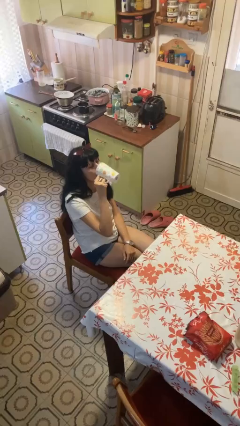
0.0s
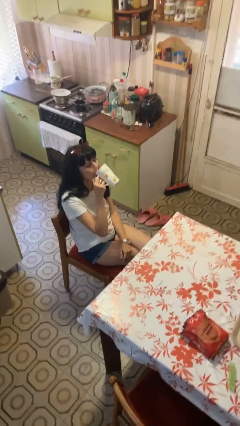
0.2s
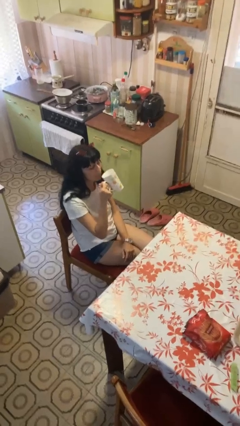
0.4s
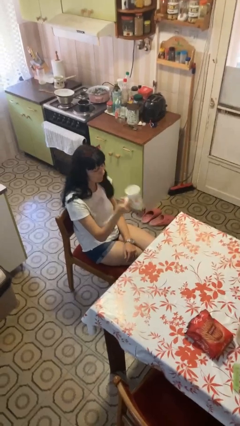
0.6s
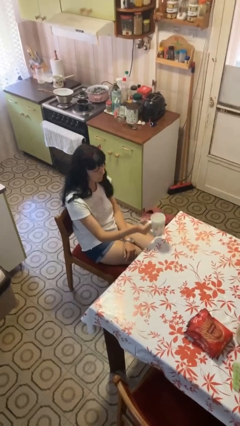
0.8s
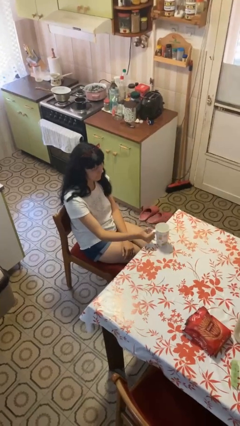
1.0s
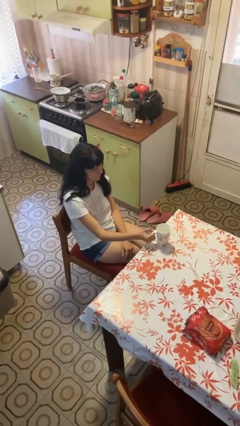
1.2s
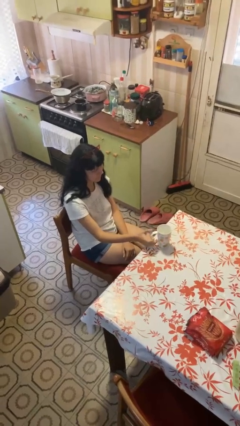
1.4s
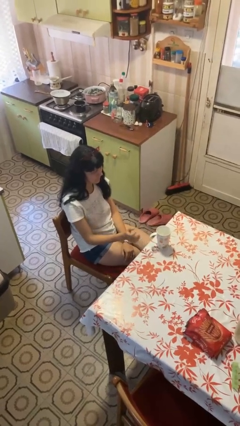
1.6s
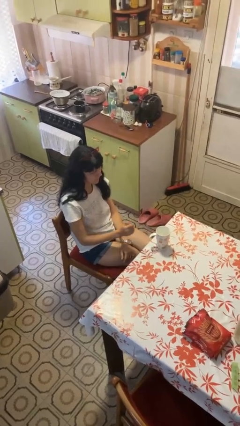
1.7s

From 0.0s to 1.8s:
person puts down object on table

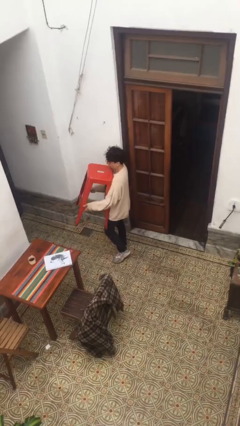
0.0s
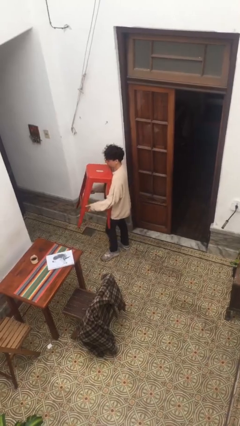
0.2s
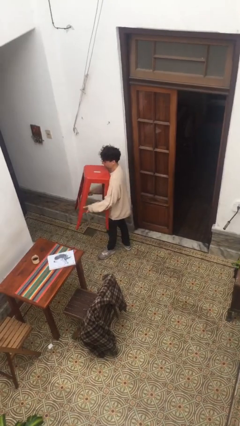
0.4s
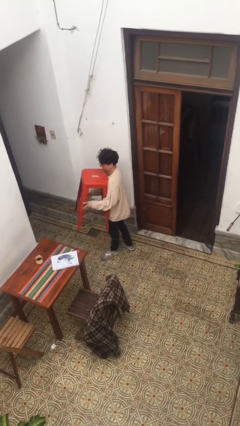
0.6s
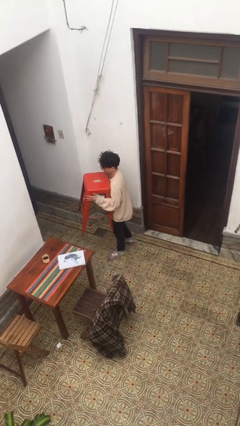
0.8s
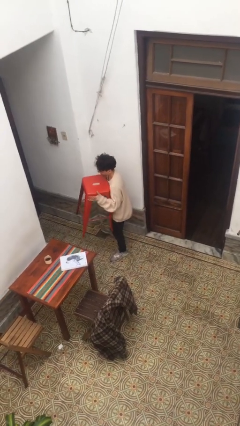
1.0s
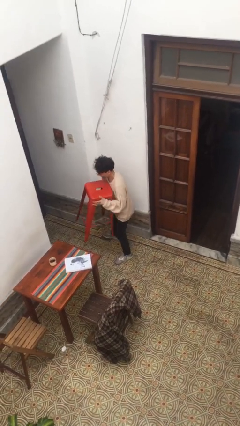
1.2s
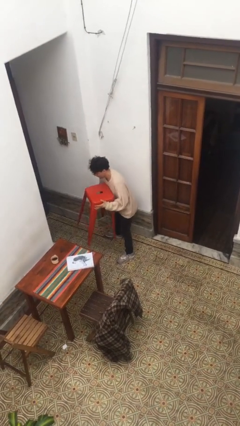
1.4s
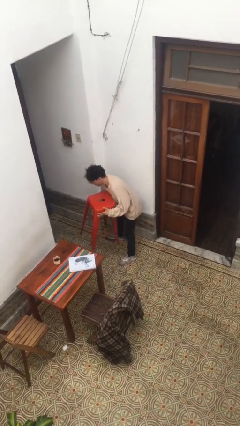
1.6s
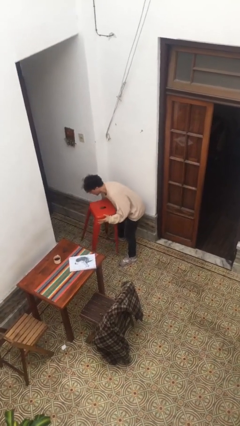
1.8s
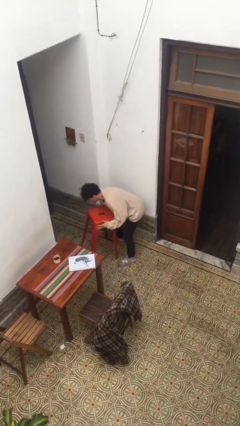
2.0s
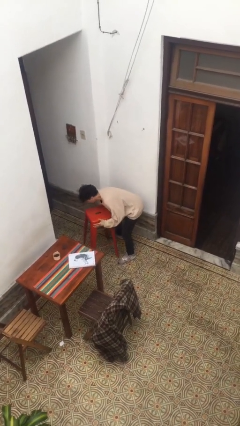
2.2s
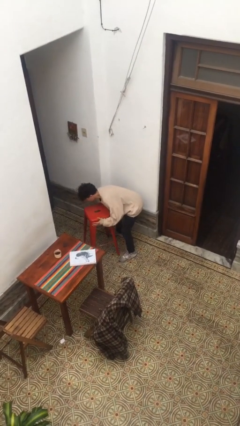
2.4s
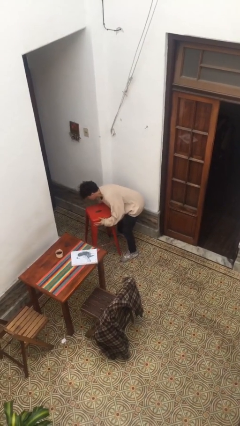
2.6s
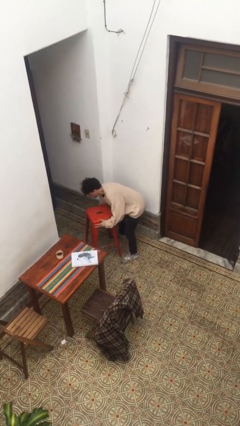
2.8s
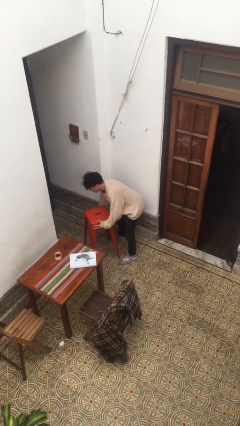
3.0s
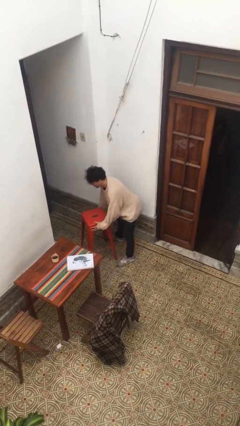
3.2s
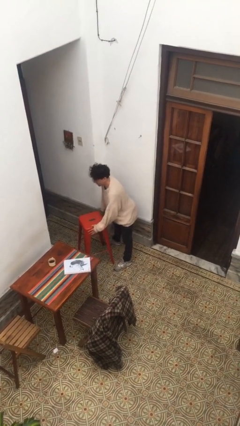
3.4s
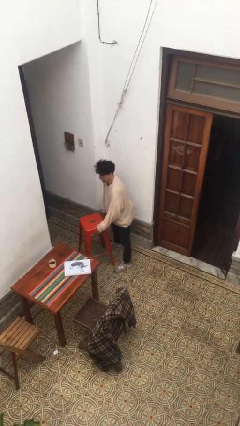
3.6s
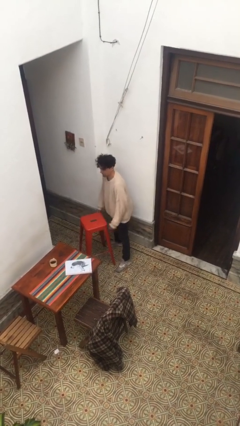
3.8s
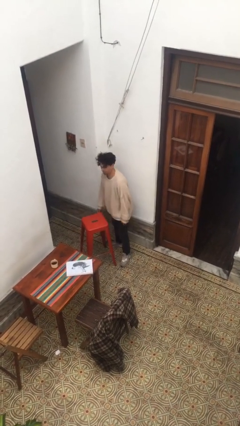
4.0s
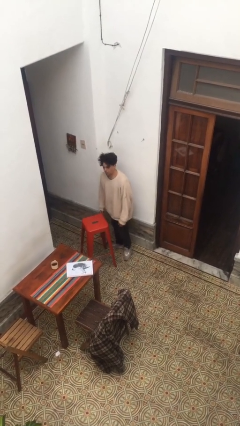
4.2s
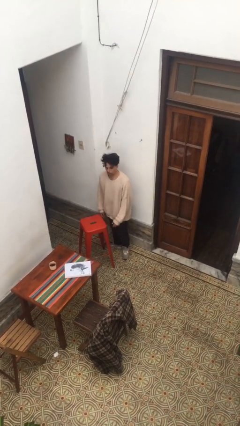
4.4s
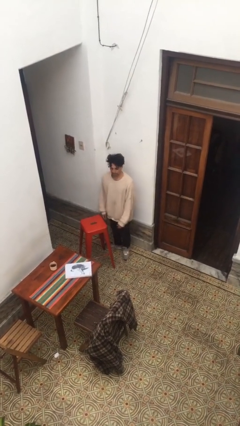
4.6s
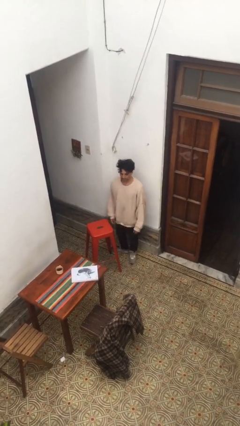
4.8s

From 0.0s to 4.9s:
person puts down object on floor

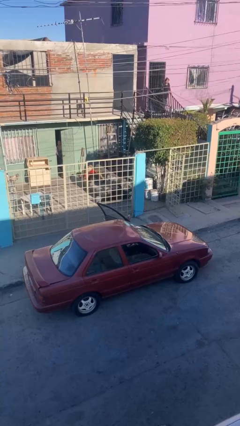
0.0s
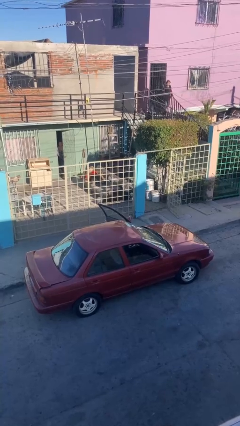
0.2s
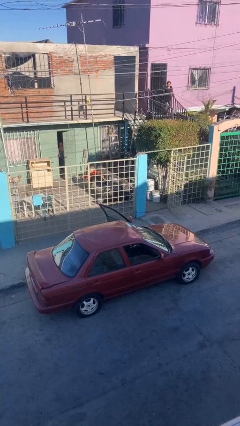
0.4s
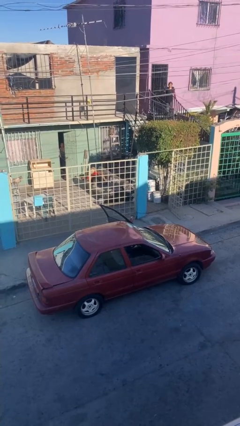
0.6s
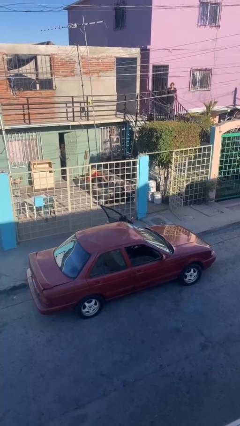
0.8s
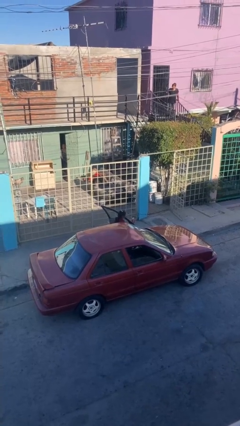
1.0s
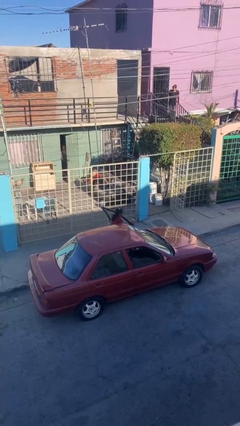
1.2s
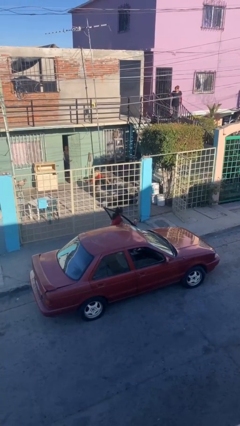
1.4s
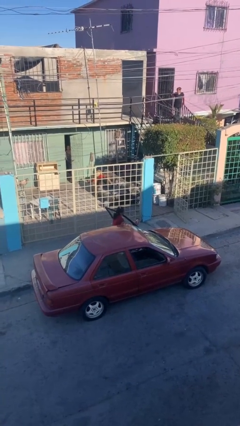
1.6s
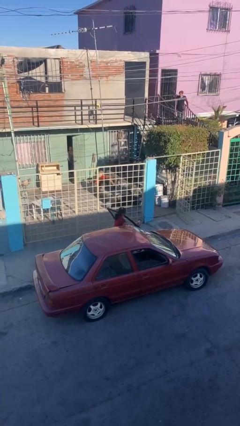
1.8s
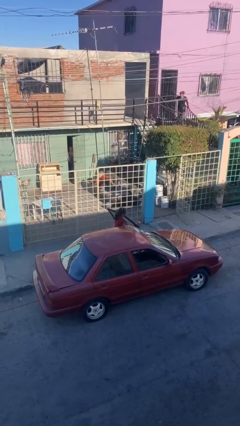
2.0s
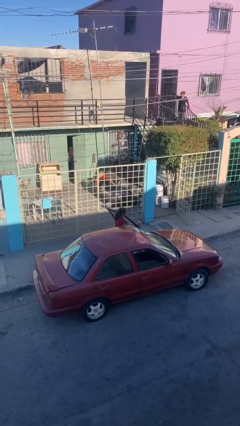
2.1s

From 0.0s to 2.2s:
person exits car

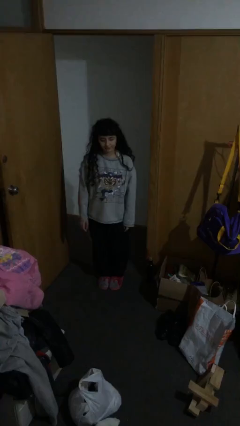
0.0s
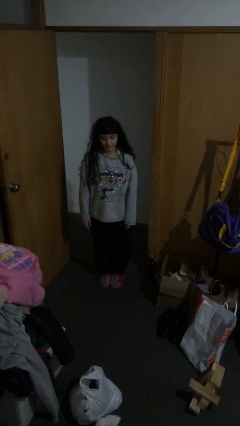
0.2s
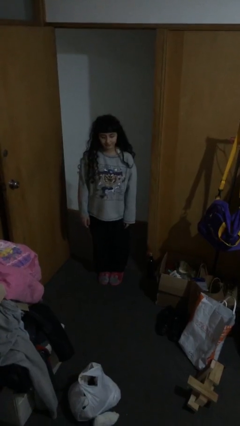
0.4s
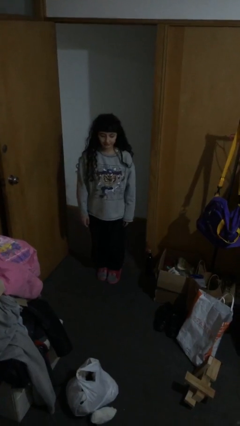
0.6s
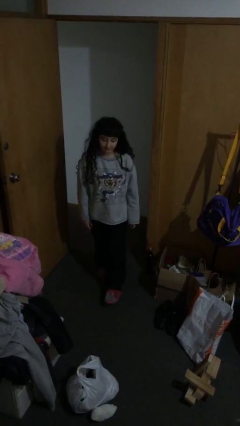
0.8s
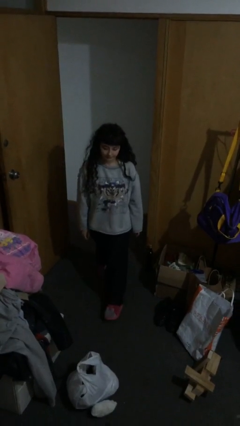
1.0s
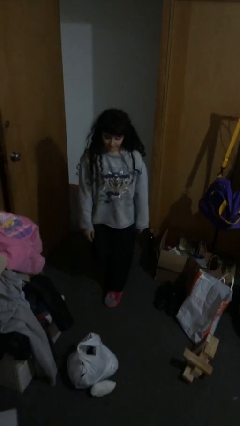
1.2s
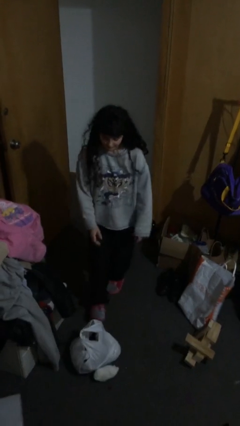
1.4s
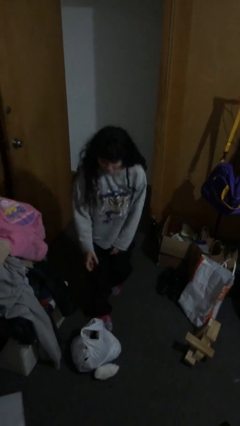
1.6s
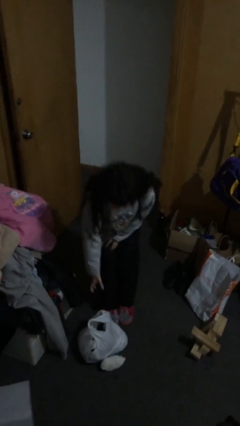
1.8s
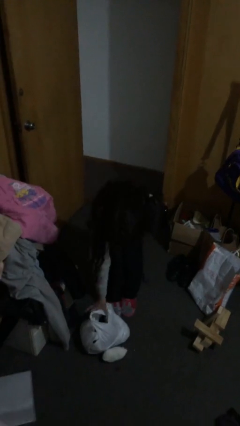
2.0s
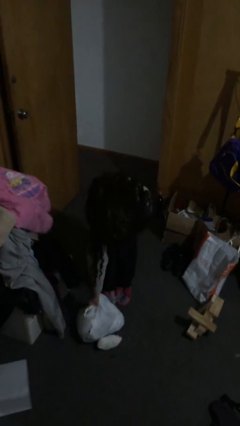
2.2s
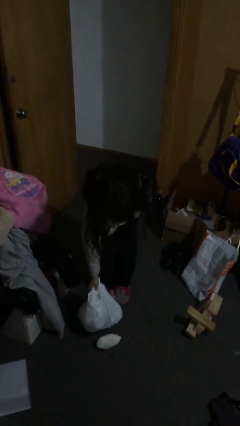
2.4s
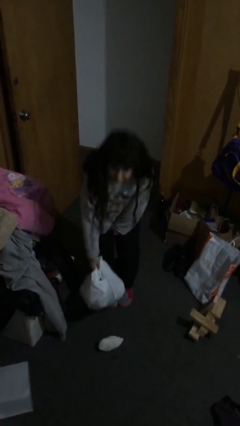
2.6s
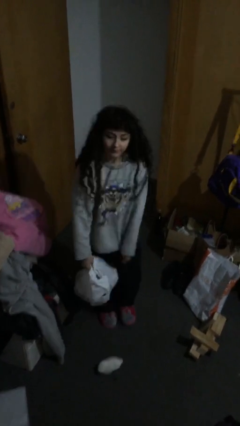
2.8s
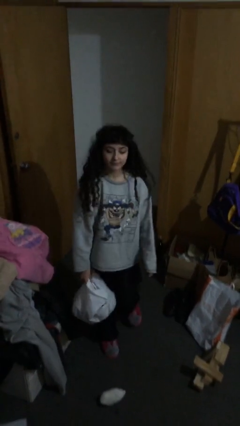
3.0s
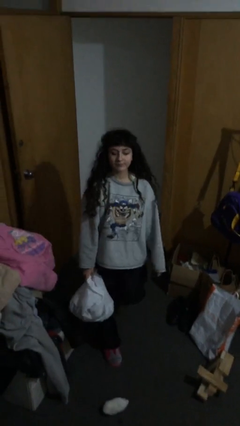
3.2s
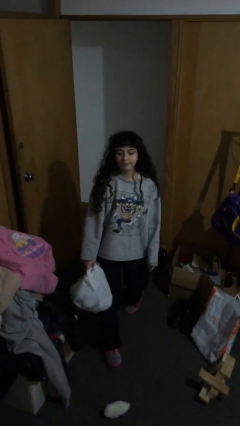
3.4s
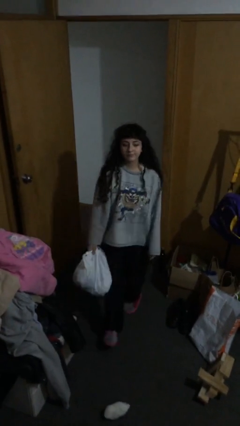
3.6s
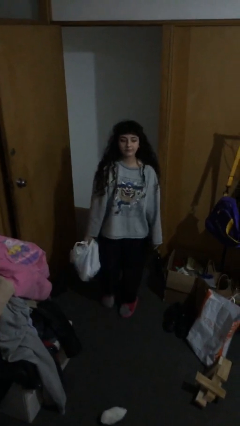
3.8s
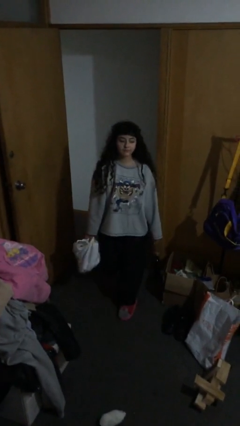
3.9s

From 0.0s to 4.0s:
person picks up object from floor

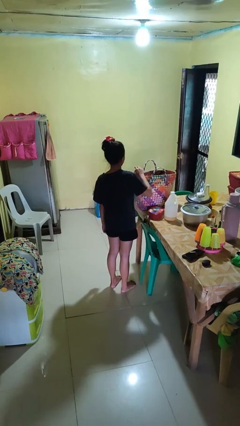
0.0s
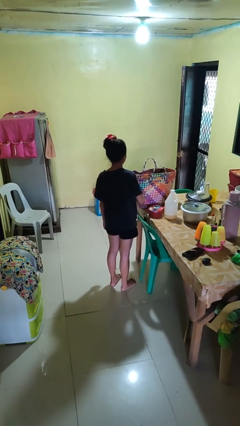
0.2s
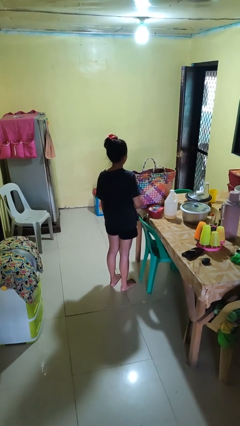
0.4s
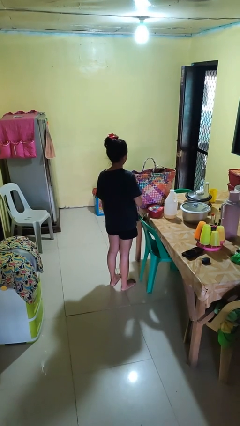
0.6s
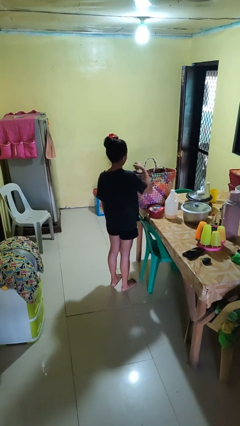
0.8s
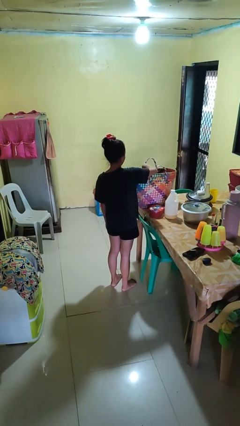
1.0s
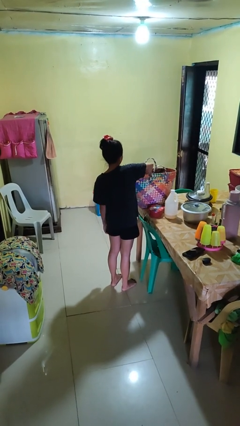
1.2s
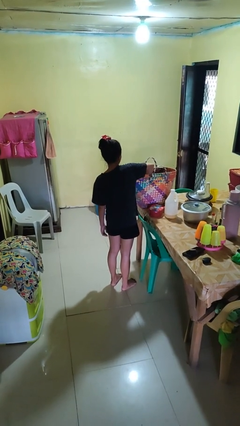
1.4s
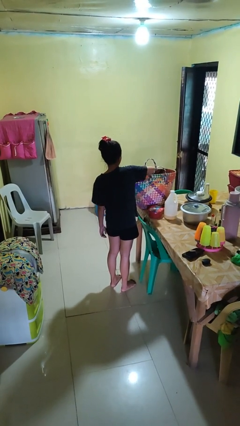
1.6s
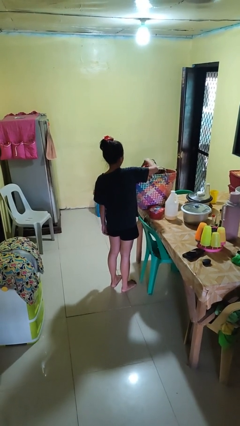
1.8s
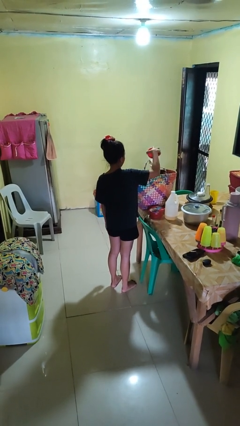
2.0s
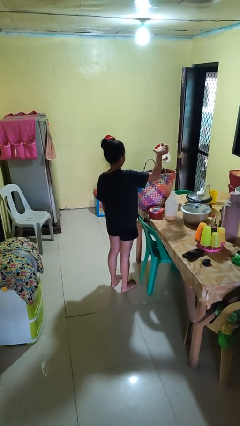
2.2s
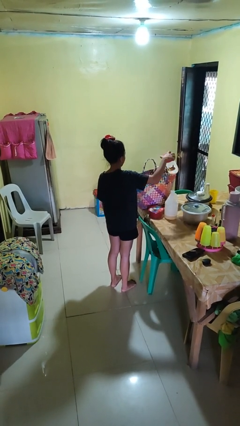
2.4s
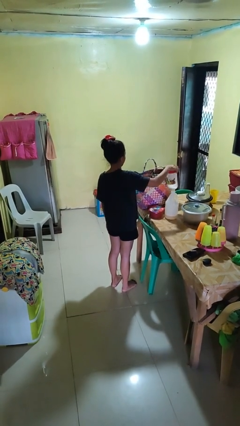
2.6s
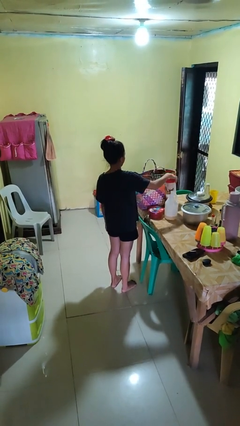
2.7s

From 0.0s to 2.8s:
person takes object from basket

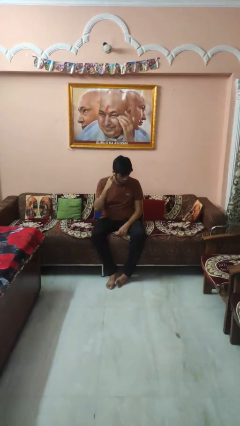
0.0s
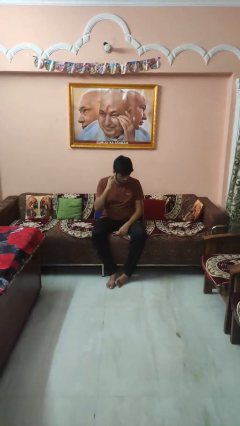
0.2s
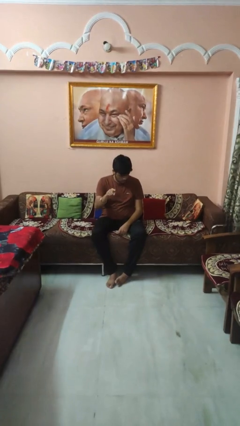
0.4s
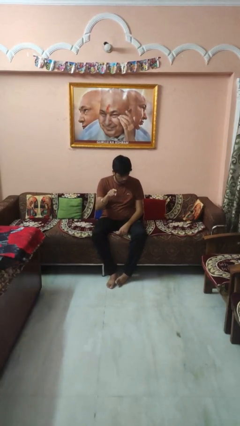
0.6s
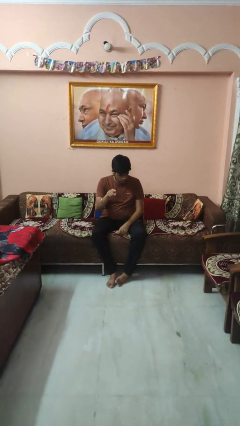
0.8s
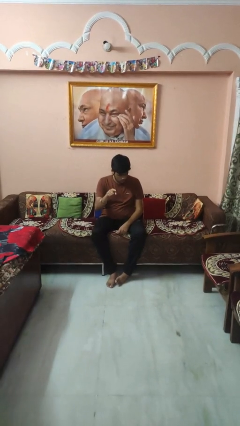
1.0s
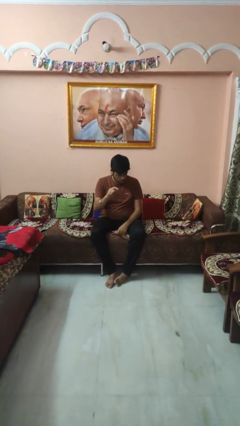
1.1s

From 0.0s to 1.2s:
person gestures listen closely

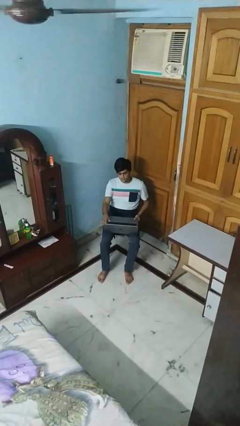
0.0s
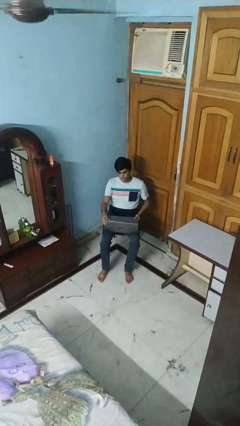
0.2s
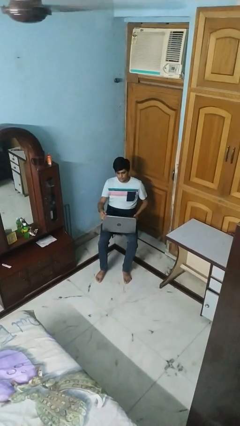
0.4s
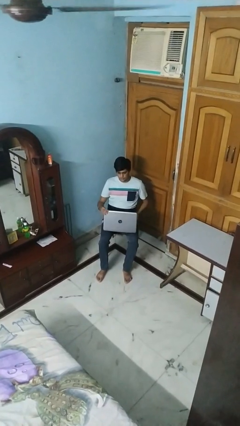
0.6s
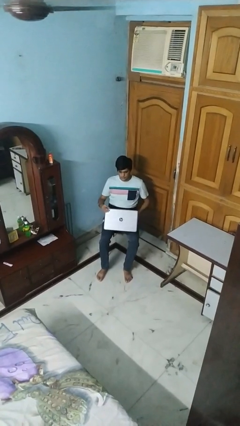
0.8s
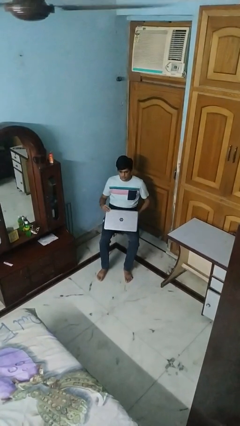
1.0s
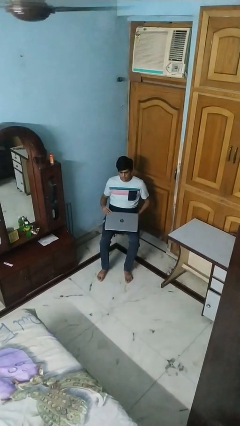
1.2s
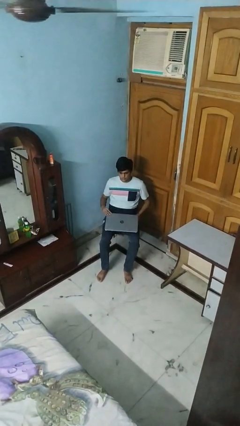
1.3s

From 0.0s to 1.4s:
person closes laptop
